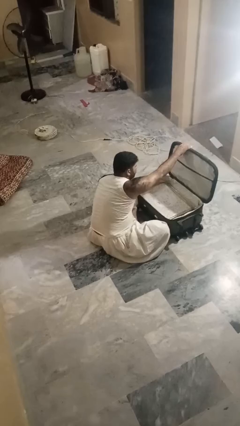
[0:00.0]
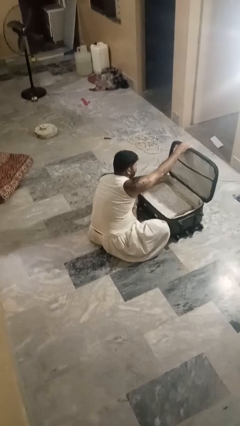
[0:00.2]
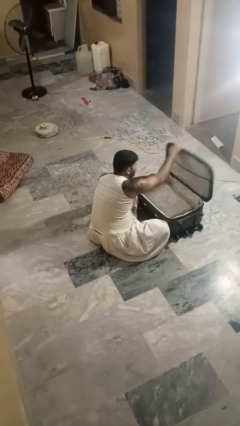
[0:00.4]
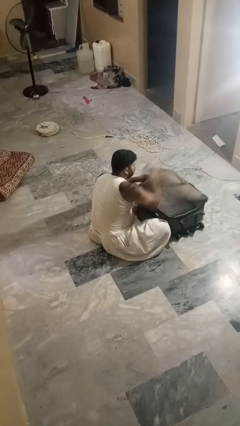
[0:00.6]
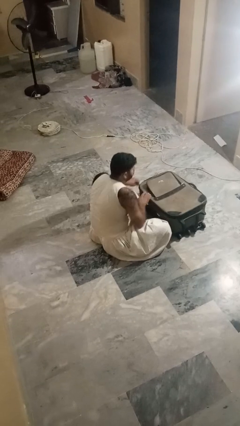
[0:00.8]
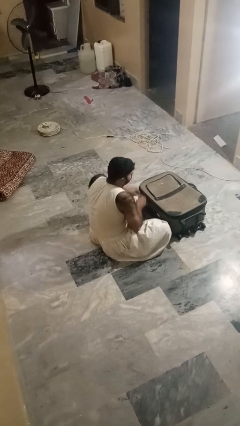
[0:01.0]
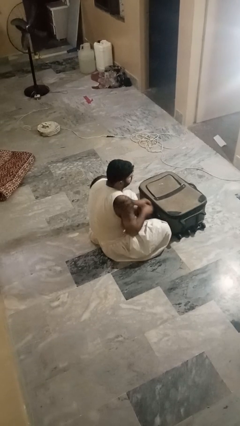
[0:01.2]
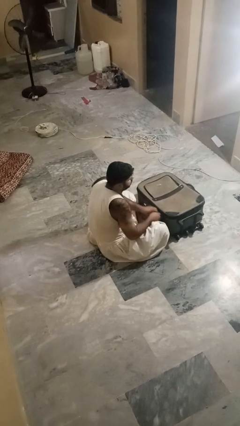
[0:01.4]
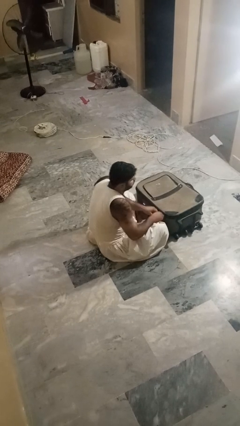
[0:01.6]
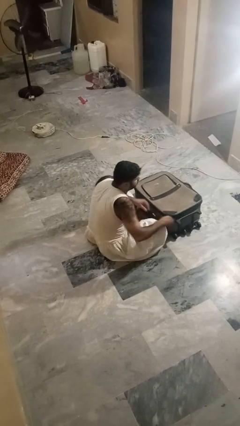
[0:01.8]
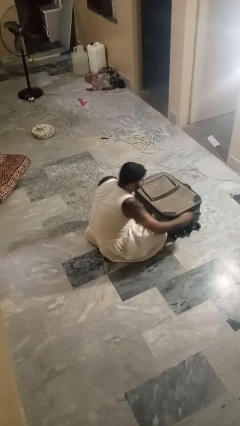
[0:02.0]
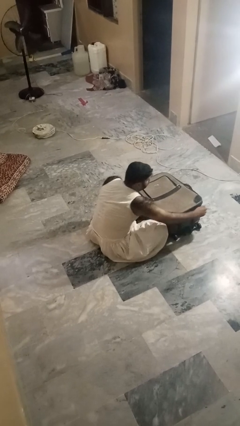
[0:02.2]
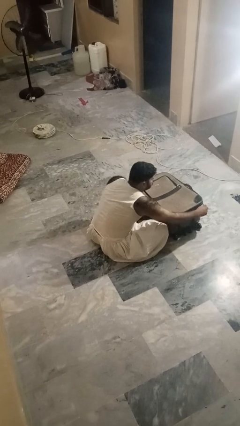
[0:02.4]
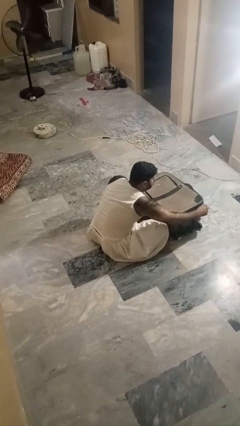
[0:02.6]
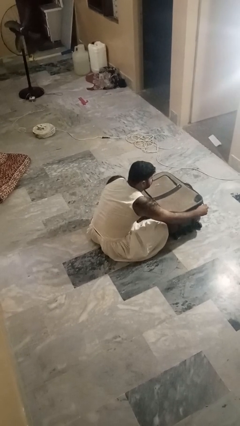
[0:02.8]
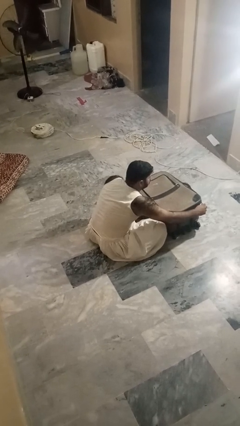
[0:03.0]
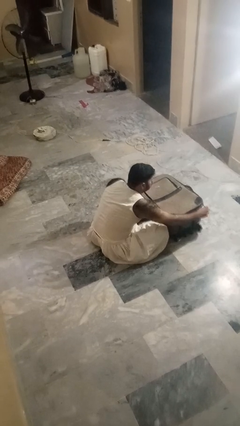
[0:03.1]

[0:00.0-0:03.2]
person closes suitcase

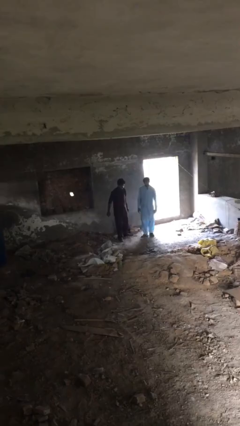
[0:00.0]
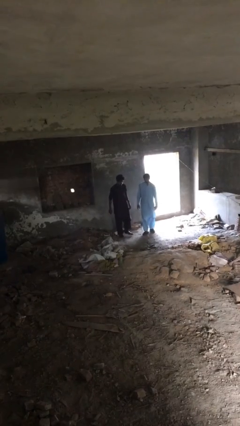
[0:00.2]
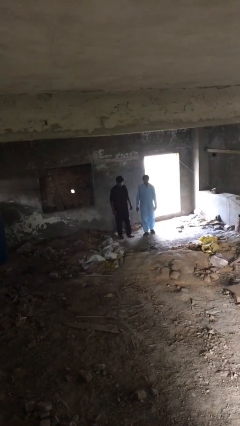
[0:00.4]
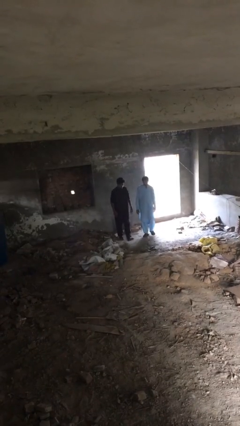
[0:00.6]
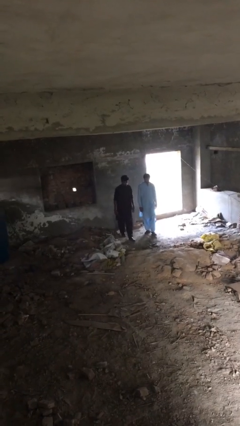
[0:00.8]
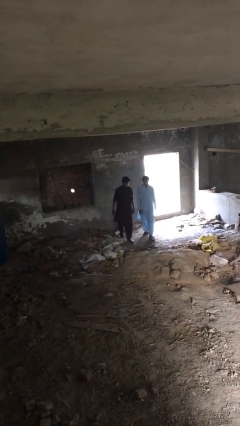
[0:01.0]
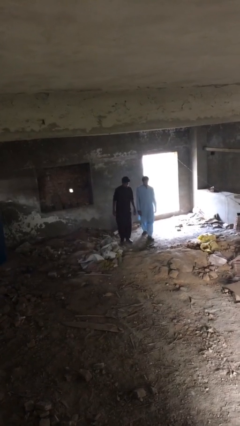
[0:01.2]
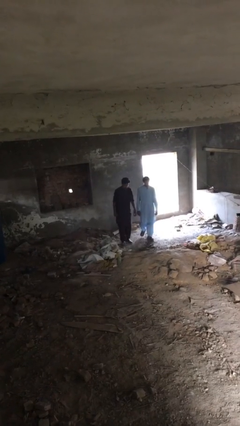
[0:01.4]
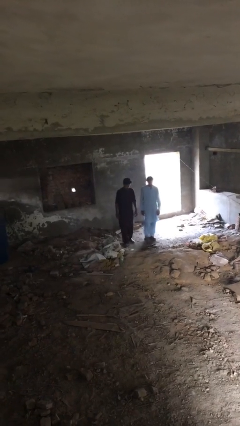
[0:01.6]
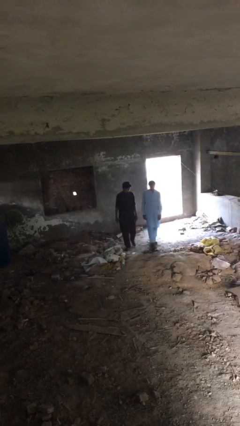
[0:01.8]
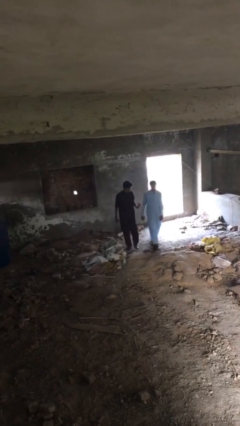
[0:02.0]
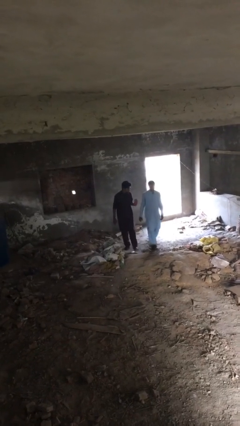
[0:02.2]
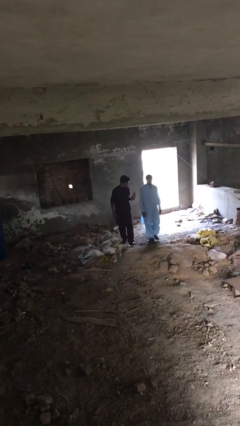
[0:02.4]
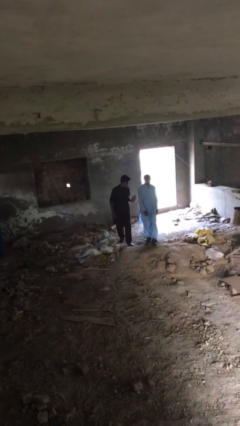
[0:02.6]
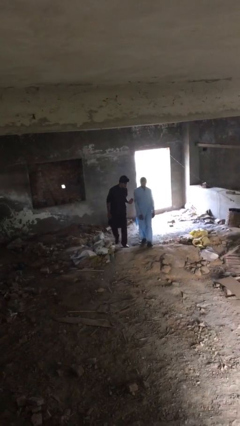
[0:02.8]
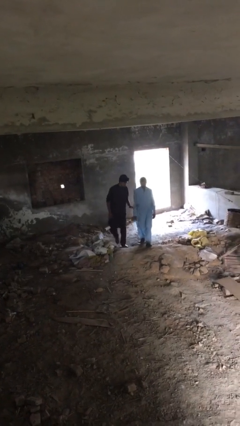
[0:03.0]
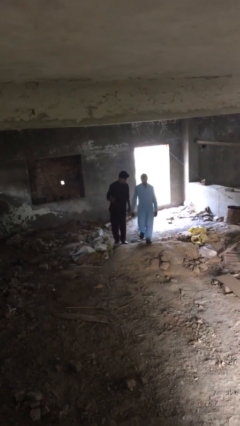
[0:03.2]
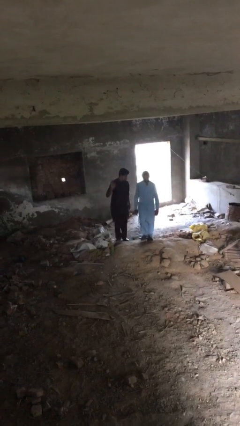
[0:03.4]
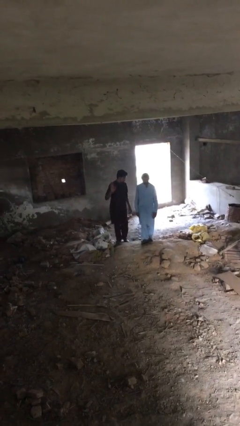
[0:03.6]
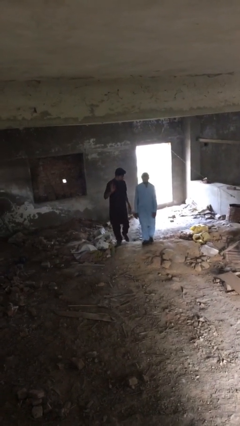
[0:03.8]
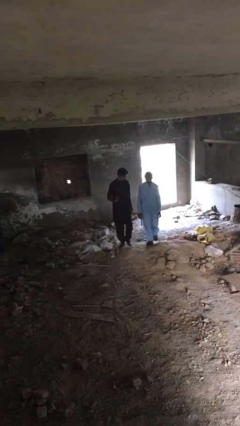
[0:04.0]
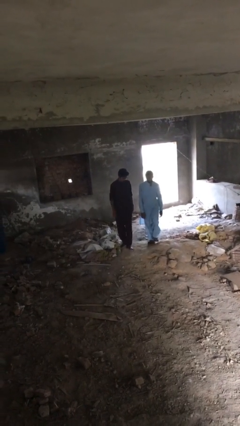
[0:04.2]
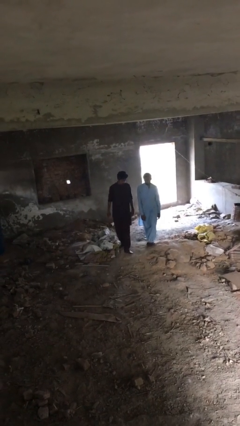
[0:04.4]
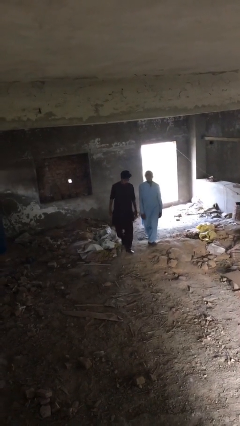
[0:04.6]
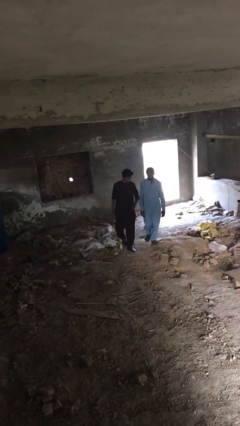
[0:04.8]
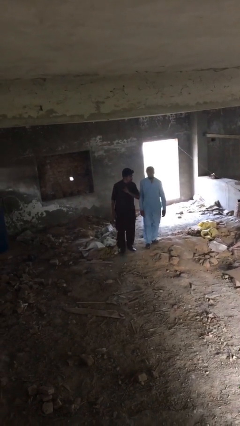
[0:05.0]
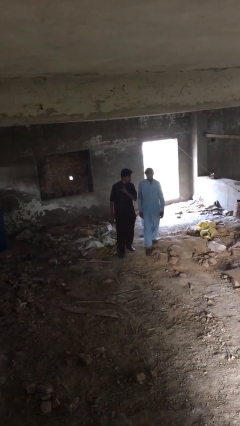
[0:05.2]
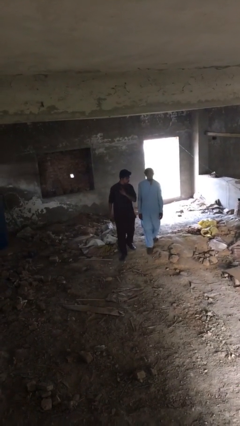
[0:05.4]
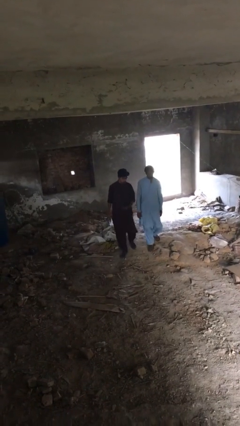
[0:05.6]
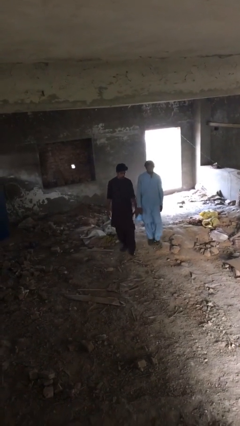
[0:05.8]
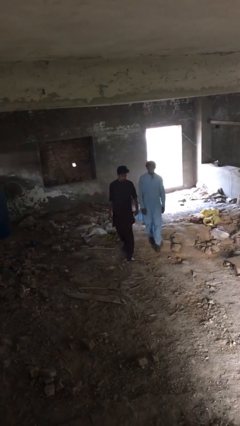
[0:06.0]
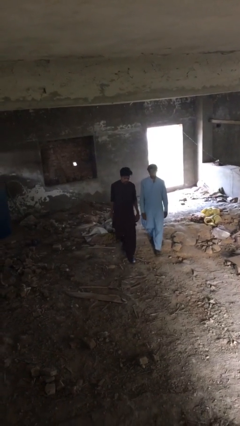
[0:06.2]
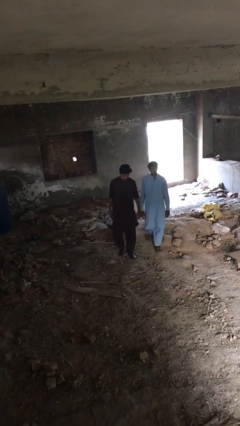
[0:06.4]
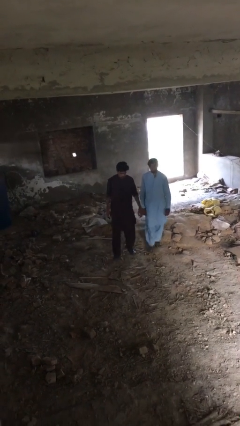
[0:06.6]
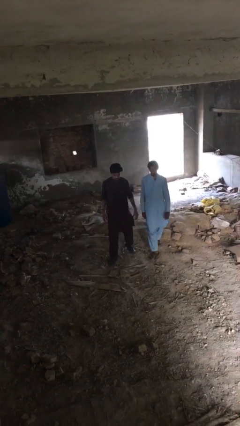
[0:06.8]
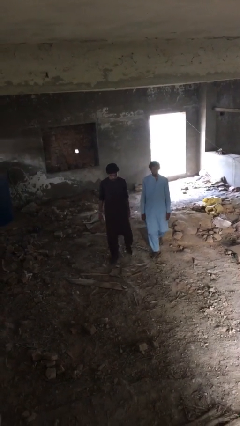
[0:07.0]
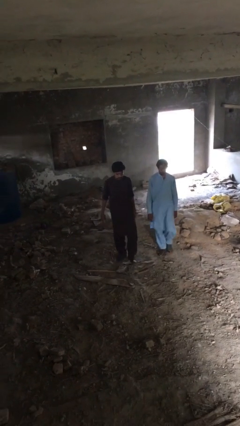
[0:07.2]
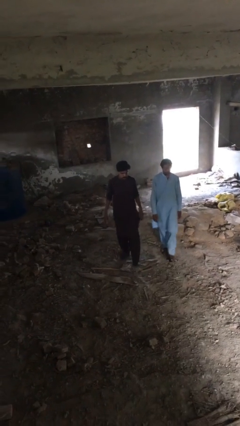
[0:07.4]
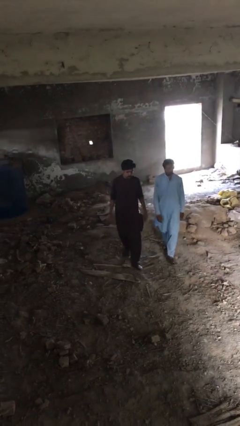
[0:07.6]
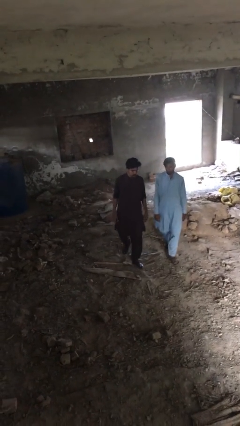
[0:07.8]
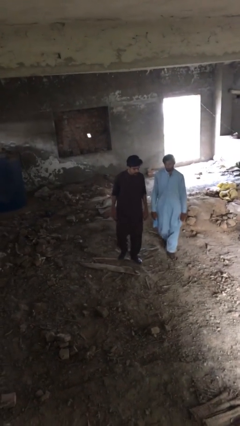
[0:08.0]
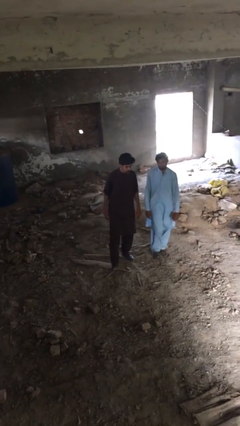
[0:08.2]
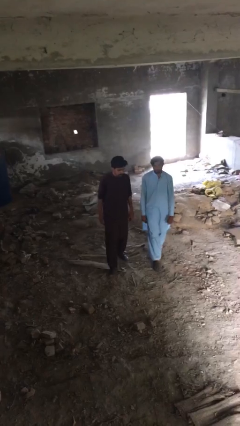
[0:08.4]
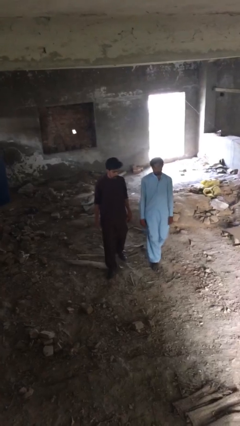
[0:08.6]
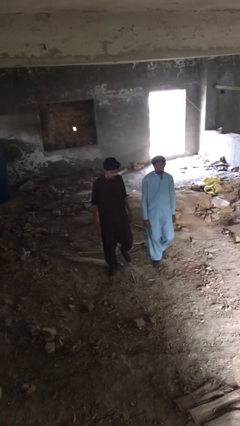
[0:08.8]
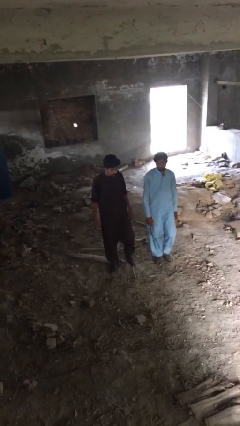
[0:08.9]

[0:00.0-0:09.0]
person talks to person

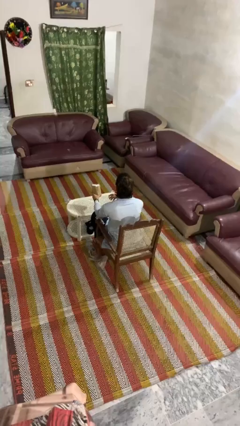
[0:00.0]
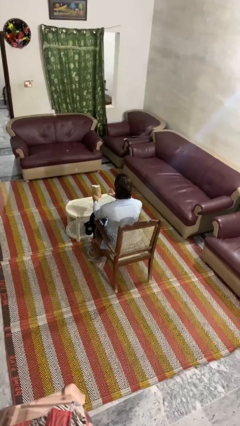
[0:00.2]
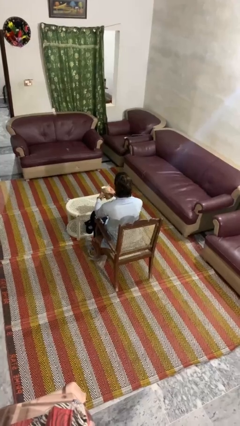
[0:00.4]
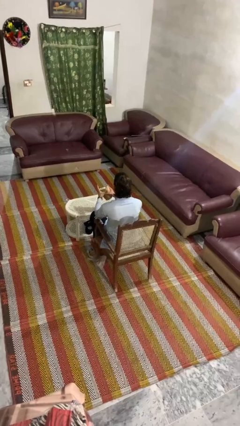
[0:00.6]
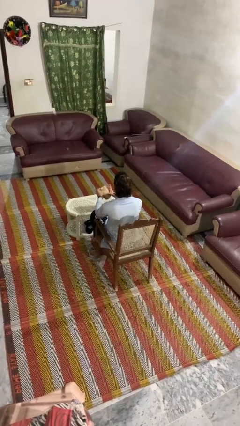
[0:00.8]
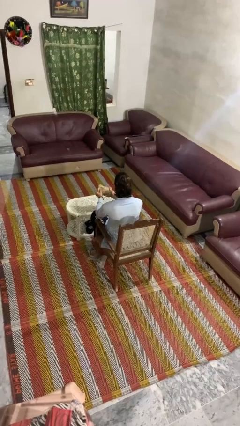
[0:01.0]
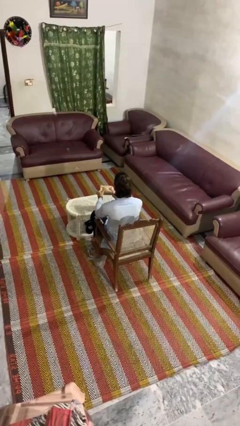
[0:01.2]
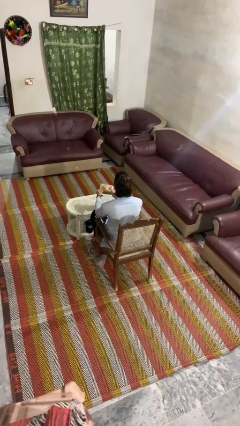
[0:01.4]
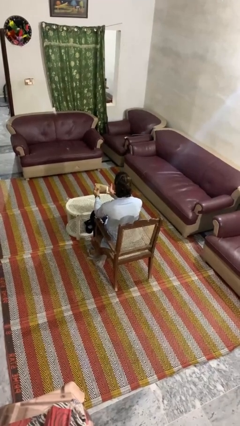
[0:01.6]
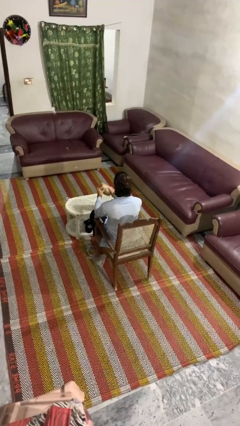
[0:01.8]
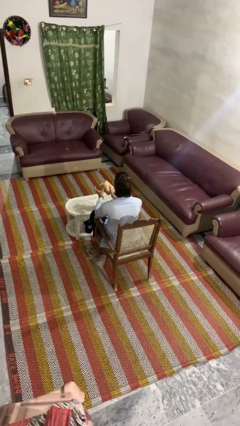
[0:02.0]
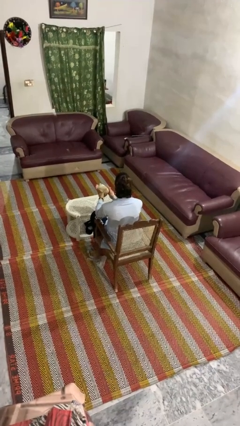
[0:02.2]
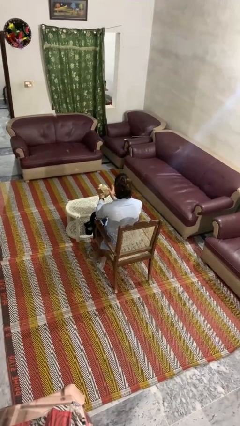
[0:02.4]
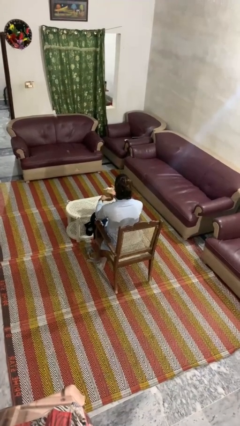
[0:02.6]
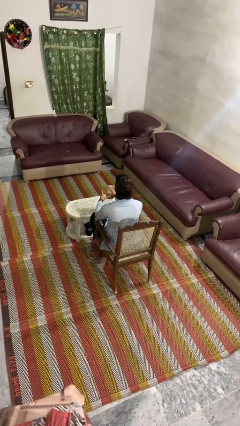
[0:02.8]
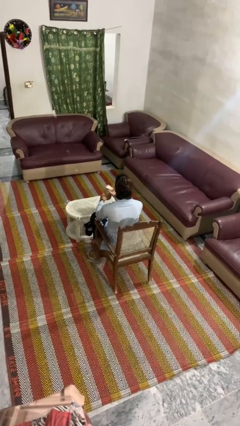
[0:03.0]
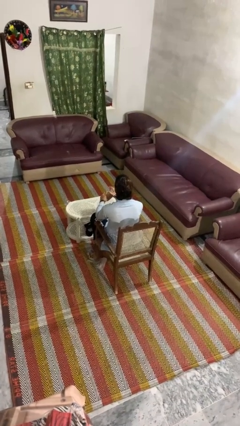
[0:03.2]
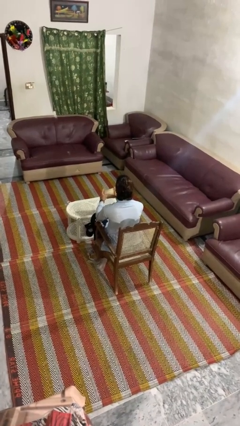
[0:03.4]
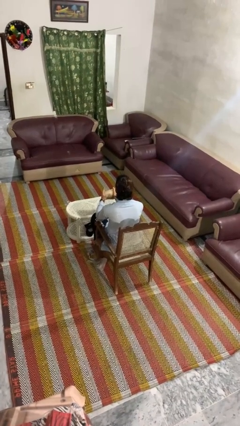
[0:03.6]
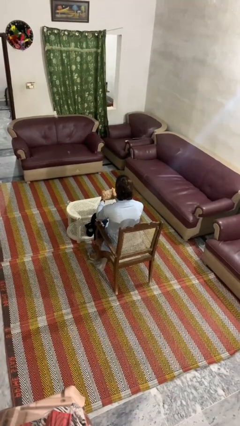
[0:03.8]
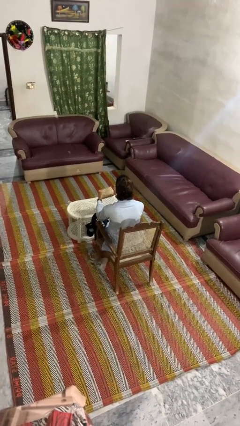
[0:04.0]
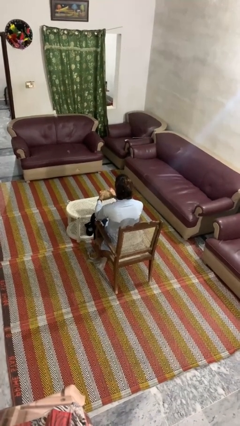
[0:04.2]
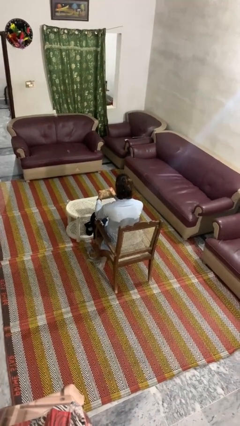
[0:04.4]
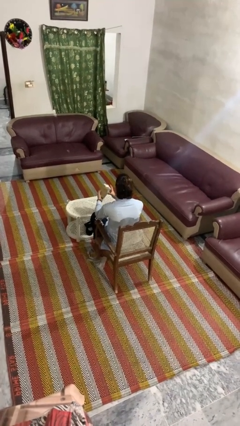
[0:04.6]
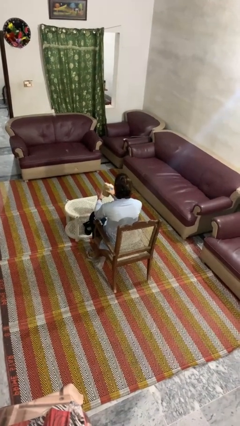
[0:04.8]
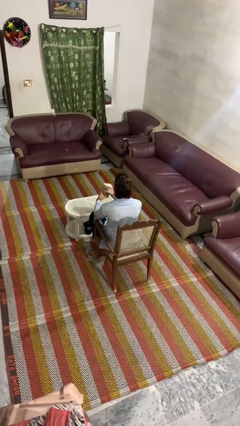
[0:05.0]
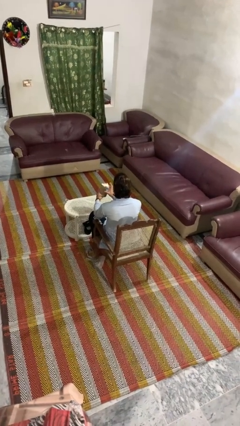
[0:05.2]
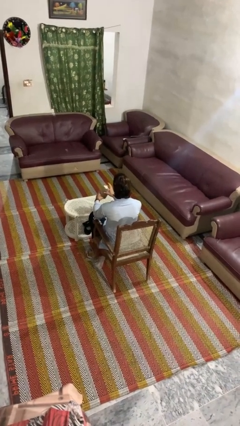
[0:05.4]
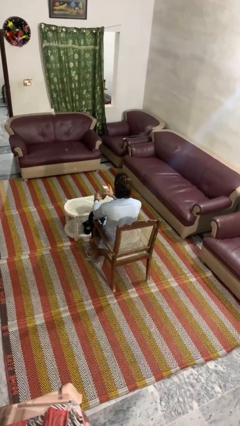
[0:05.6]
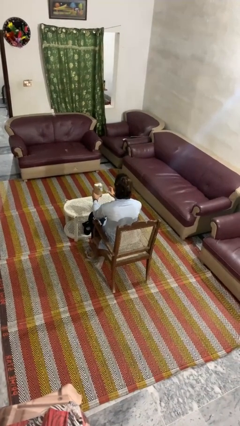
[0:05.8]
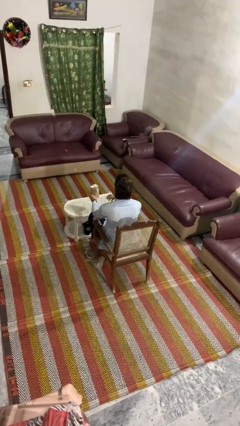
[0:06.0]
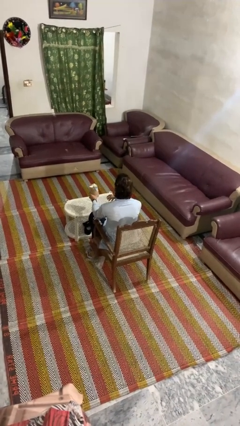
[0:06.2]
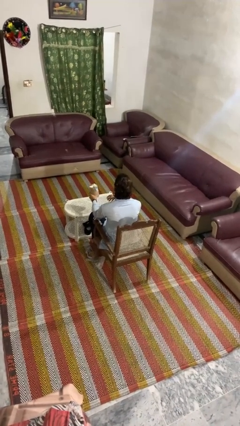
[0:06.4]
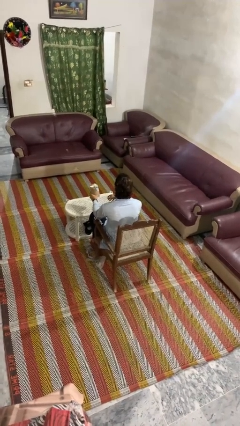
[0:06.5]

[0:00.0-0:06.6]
person squeezes object
